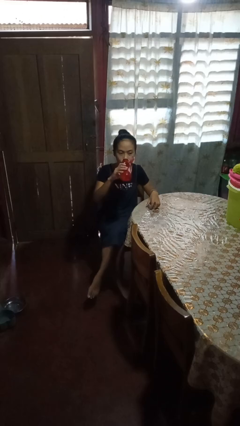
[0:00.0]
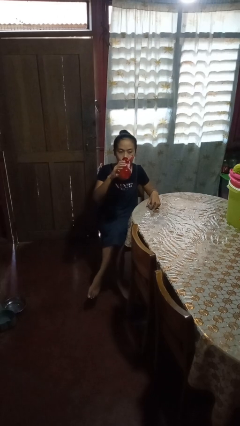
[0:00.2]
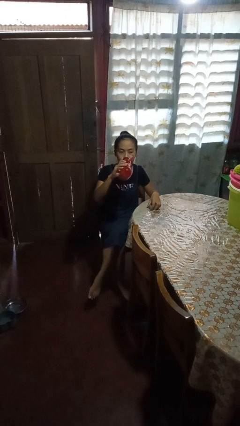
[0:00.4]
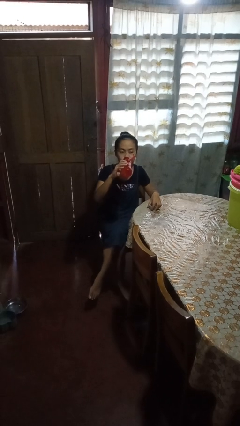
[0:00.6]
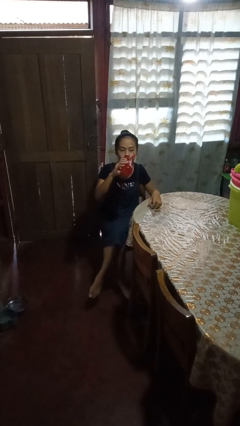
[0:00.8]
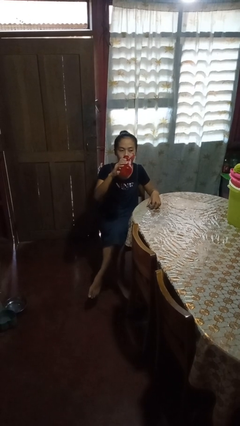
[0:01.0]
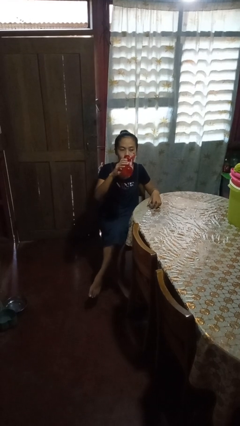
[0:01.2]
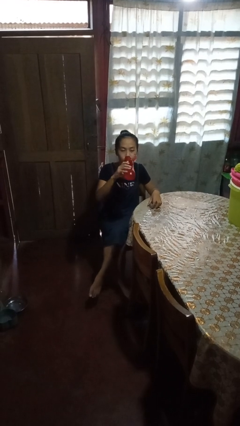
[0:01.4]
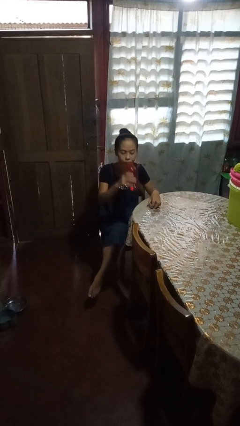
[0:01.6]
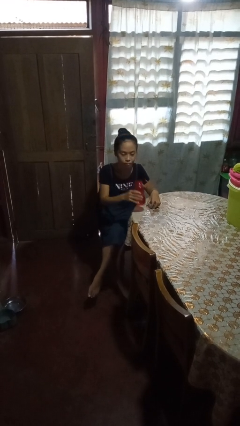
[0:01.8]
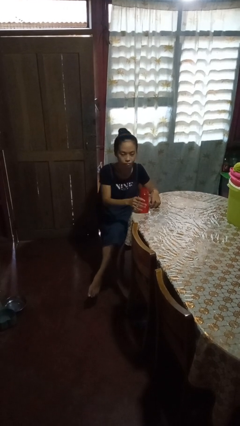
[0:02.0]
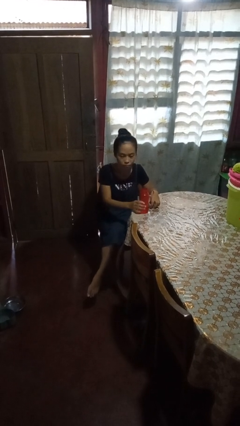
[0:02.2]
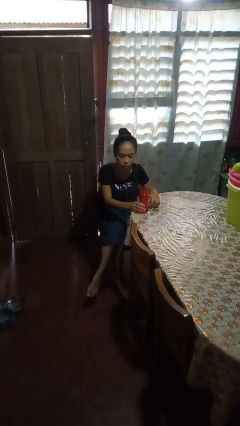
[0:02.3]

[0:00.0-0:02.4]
person drinks from bottle

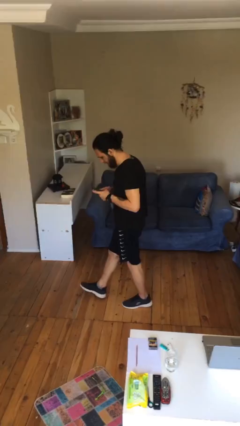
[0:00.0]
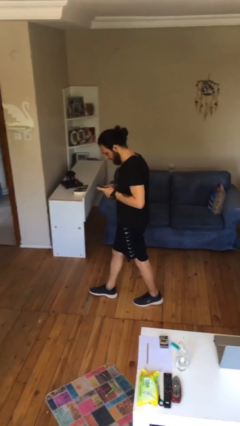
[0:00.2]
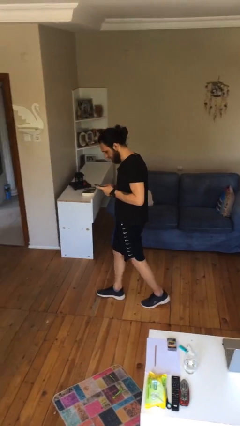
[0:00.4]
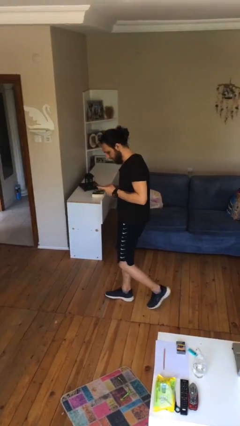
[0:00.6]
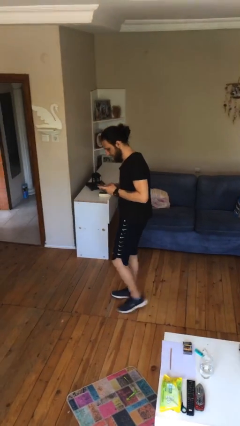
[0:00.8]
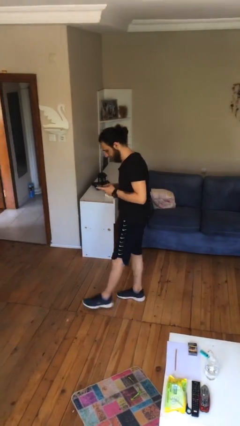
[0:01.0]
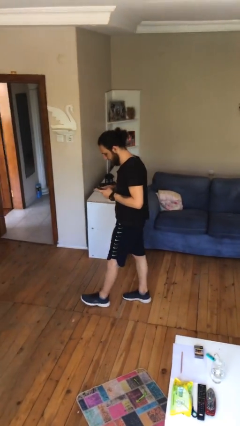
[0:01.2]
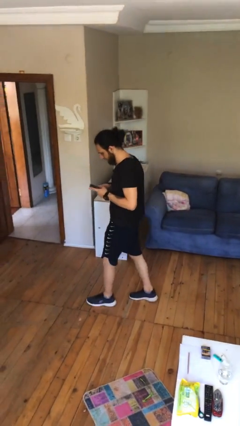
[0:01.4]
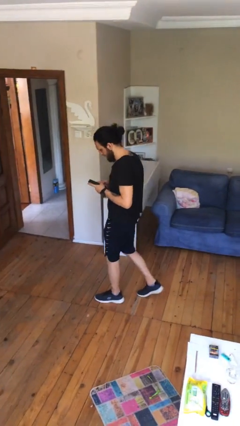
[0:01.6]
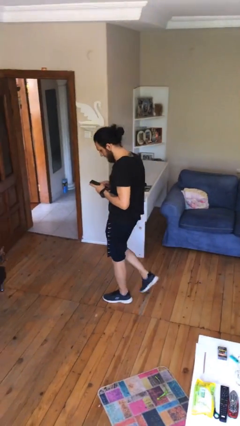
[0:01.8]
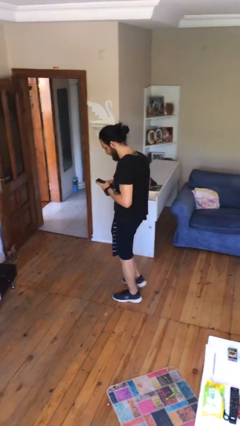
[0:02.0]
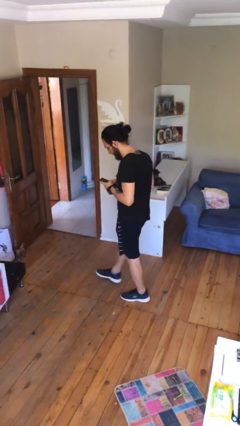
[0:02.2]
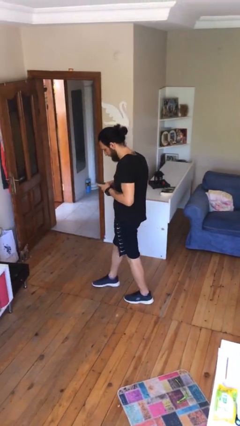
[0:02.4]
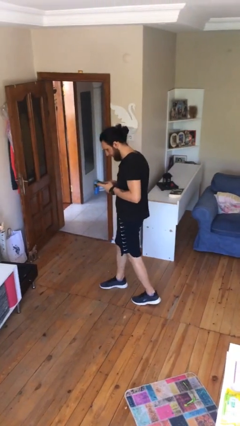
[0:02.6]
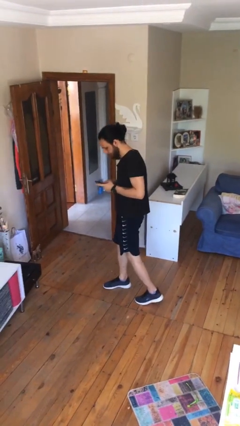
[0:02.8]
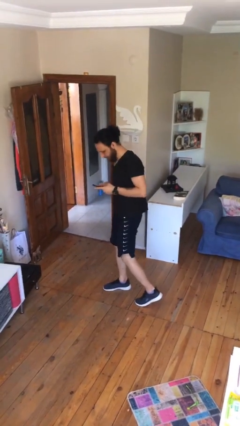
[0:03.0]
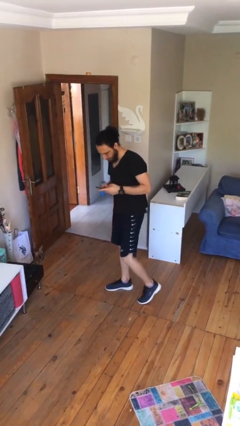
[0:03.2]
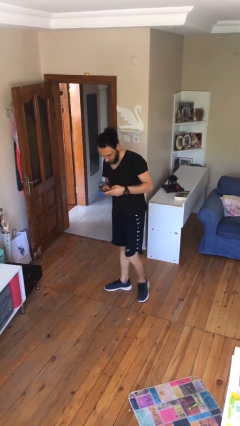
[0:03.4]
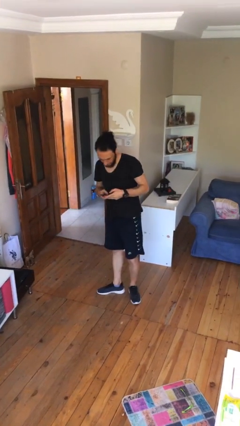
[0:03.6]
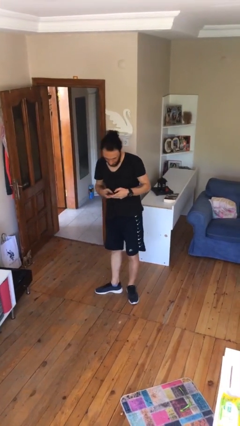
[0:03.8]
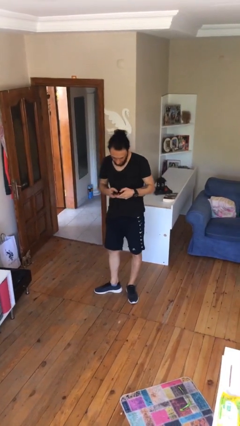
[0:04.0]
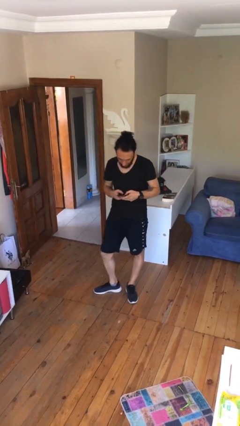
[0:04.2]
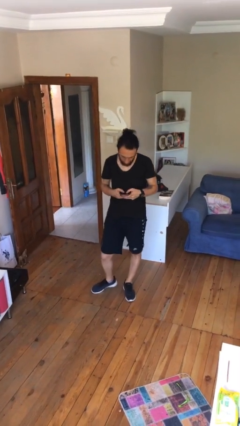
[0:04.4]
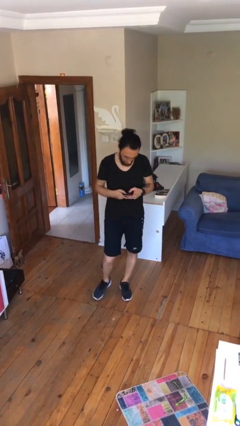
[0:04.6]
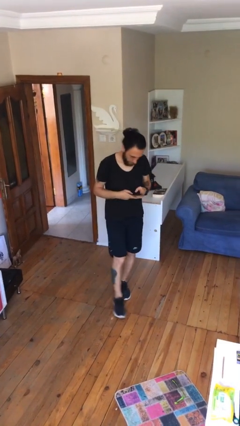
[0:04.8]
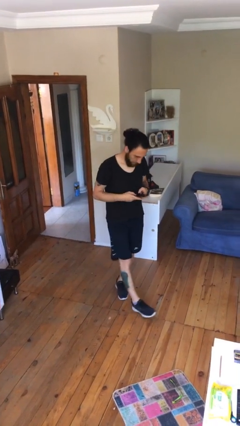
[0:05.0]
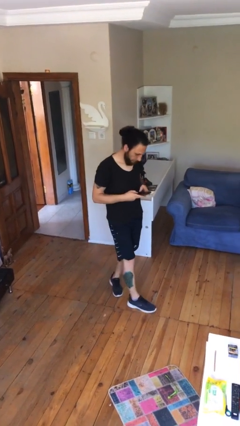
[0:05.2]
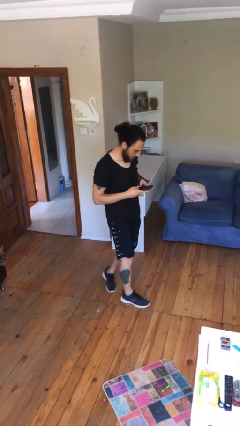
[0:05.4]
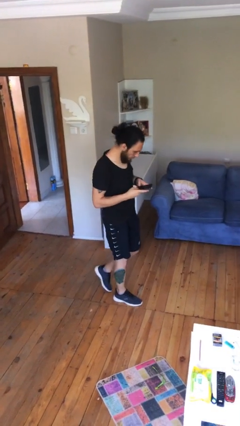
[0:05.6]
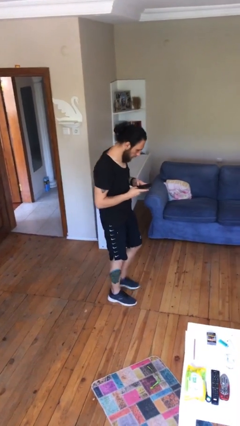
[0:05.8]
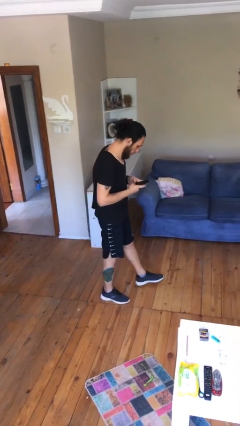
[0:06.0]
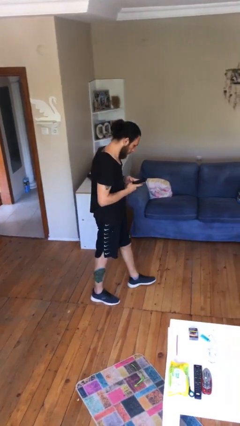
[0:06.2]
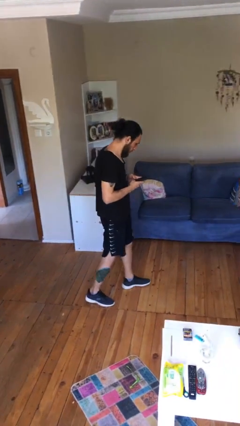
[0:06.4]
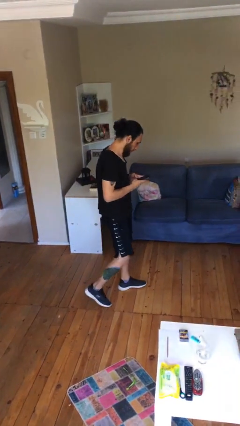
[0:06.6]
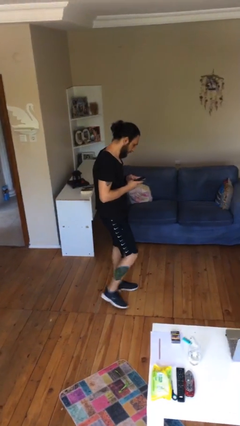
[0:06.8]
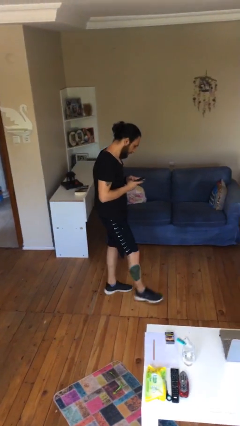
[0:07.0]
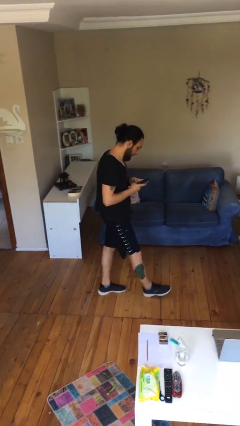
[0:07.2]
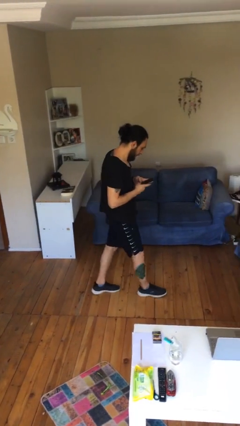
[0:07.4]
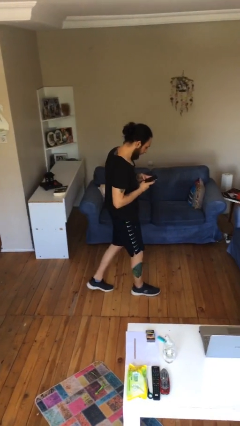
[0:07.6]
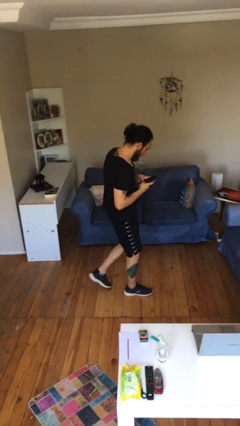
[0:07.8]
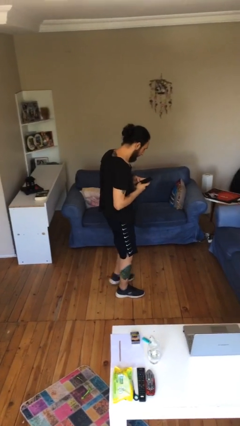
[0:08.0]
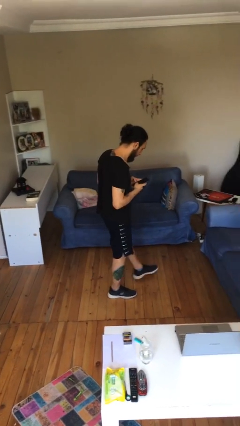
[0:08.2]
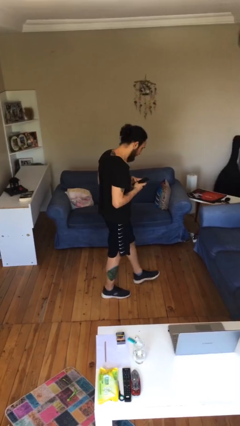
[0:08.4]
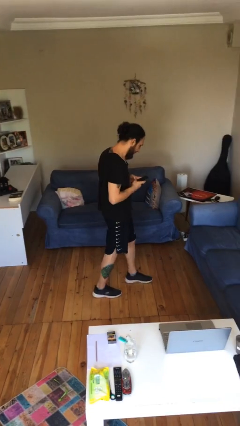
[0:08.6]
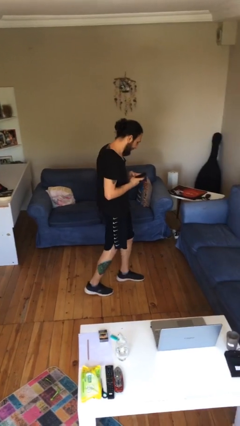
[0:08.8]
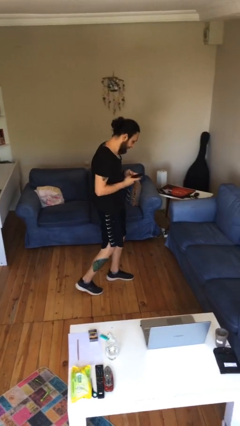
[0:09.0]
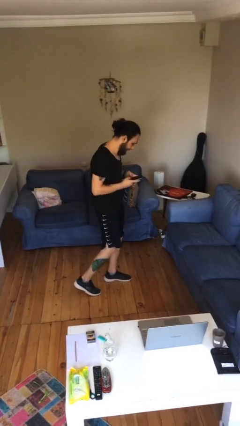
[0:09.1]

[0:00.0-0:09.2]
person texts on phone

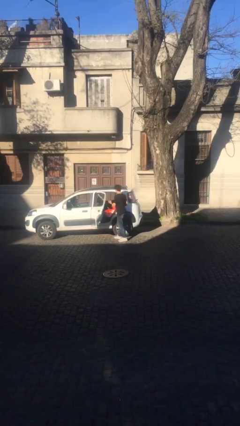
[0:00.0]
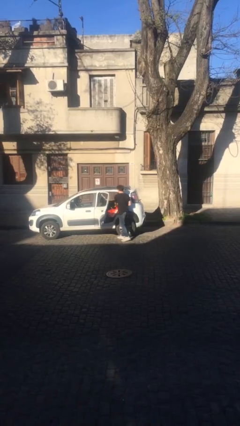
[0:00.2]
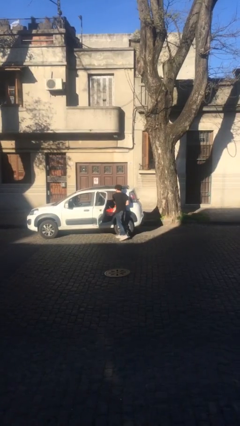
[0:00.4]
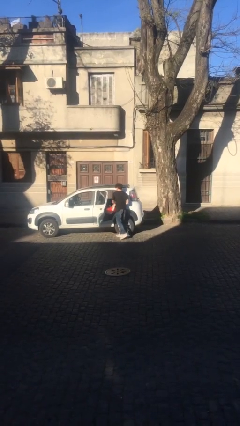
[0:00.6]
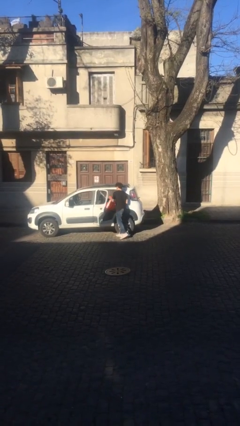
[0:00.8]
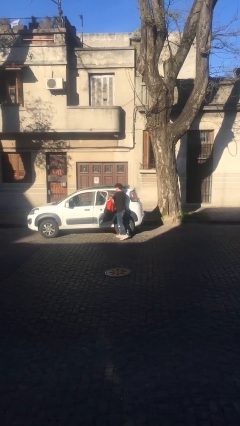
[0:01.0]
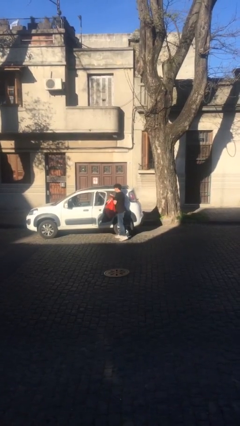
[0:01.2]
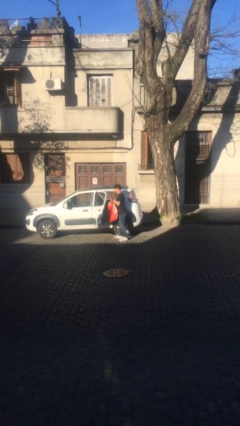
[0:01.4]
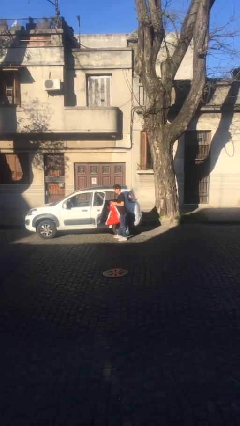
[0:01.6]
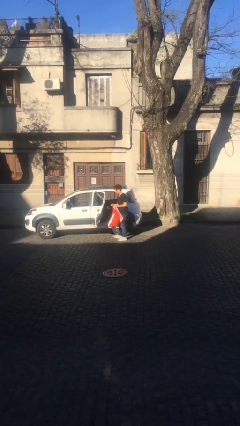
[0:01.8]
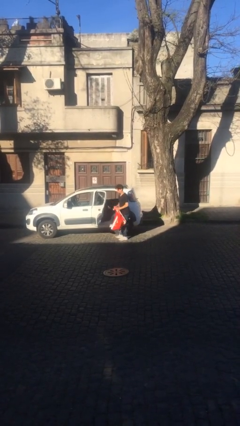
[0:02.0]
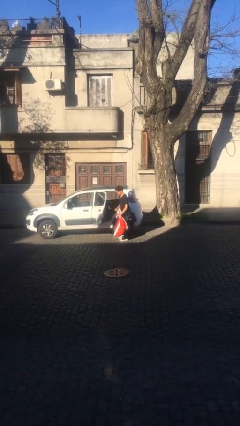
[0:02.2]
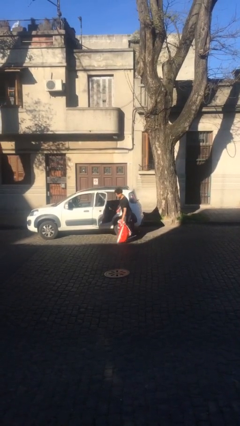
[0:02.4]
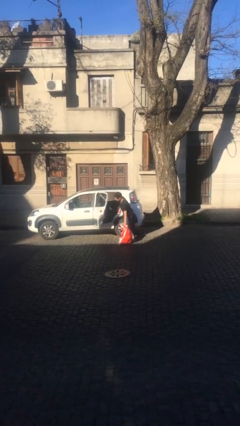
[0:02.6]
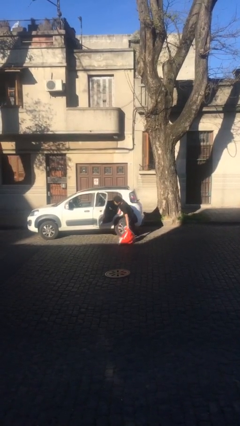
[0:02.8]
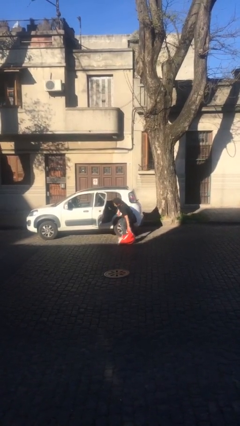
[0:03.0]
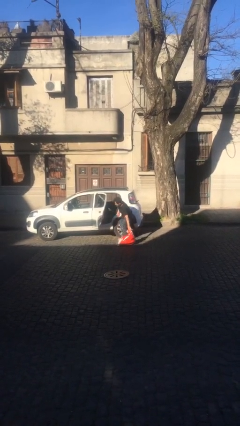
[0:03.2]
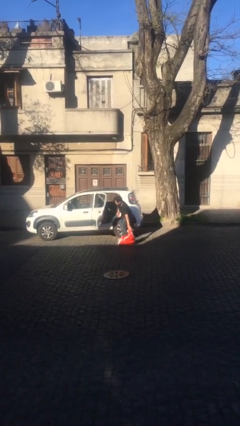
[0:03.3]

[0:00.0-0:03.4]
person unloads car

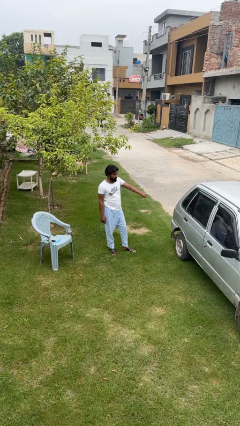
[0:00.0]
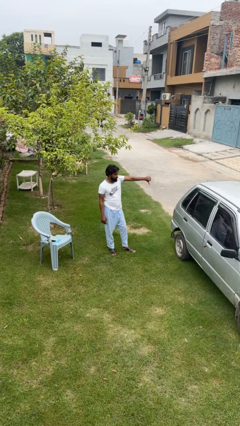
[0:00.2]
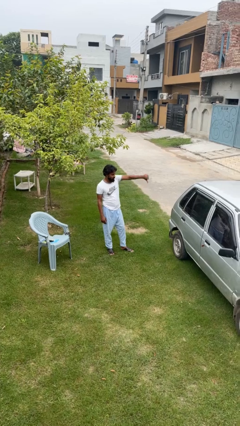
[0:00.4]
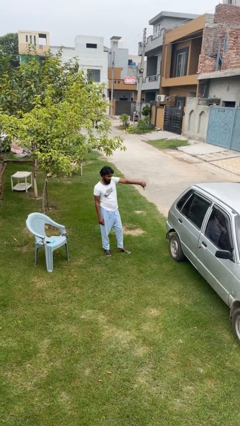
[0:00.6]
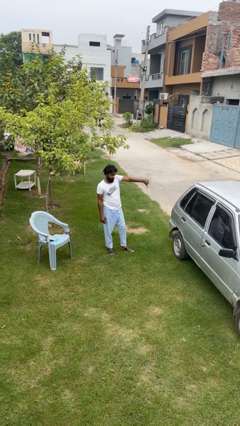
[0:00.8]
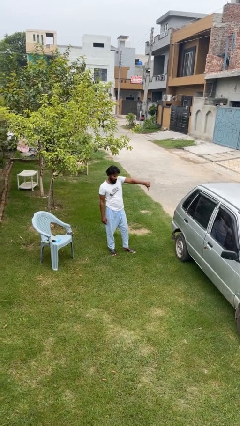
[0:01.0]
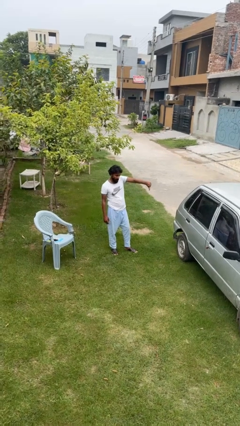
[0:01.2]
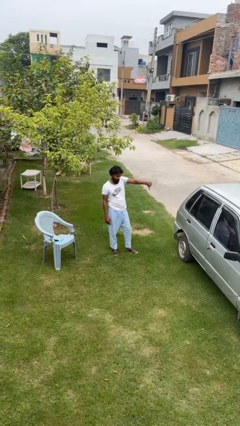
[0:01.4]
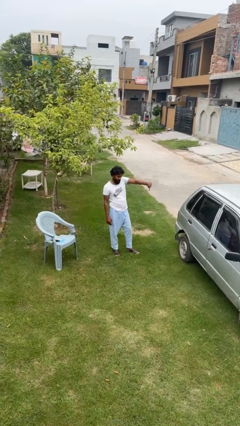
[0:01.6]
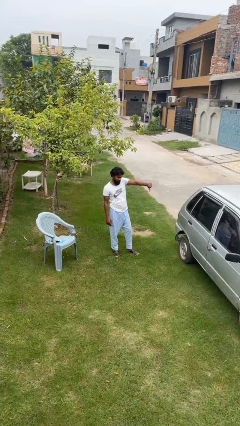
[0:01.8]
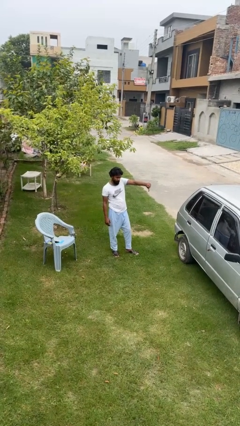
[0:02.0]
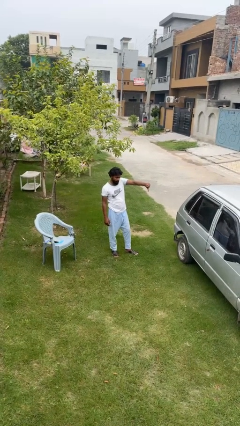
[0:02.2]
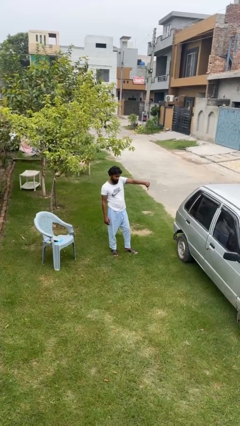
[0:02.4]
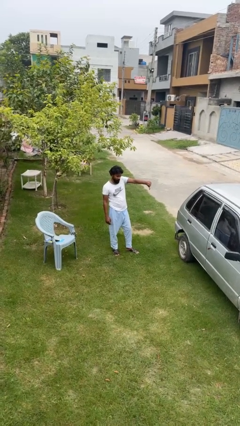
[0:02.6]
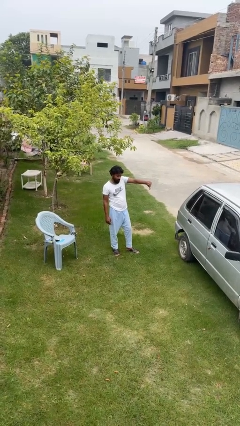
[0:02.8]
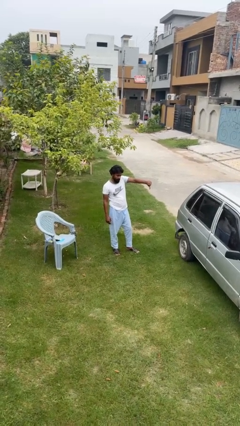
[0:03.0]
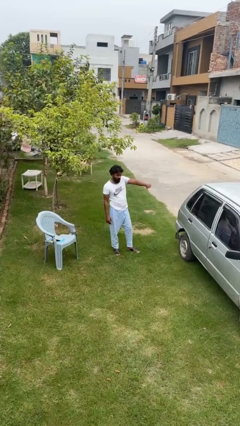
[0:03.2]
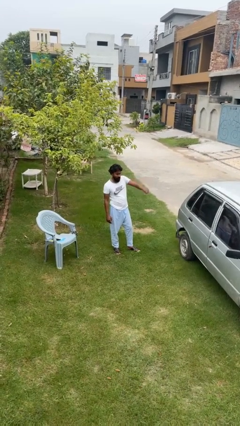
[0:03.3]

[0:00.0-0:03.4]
person gestures thumbs down
